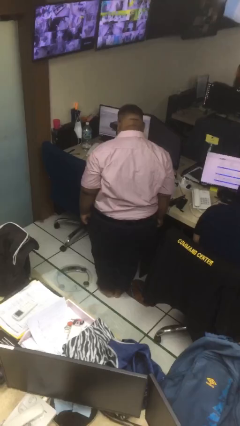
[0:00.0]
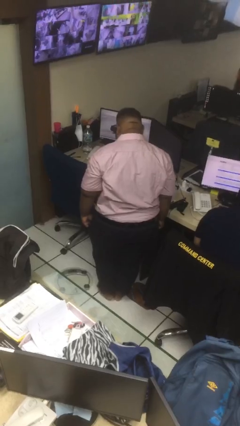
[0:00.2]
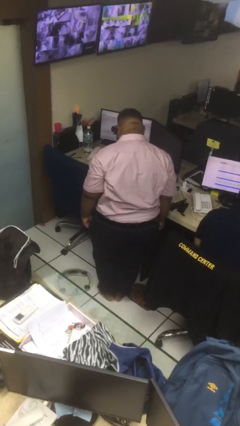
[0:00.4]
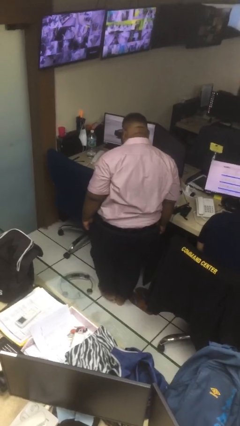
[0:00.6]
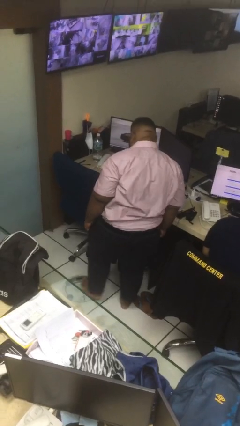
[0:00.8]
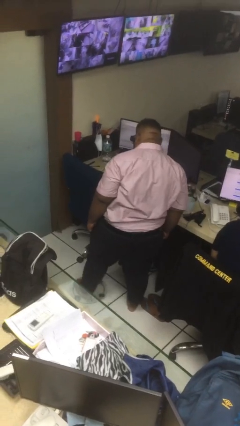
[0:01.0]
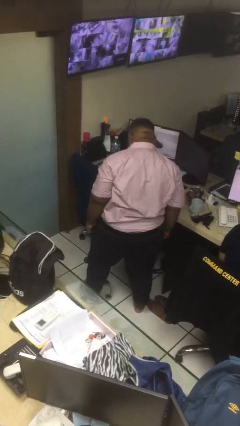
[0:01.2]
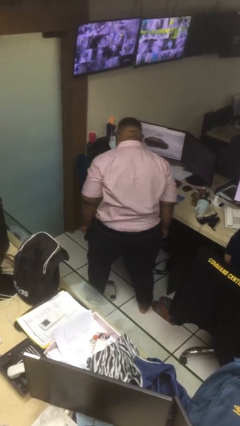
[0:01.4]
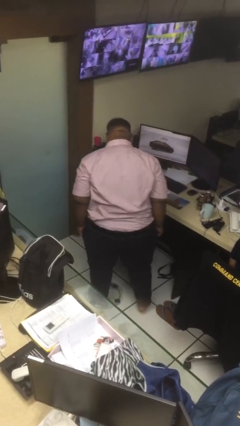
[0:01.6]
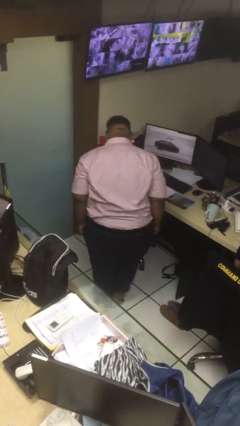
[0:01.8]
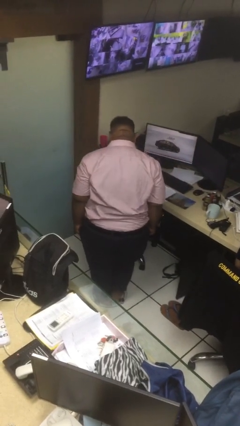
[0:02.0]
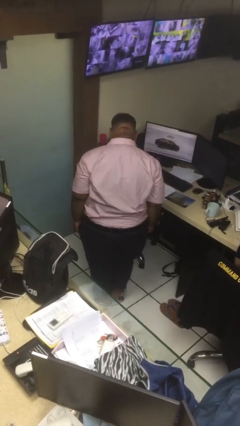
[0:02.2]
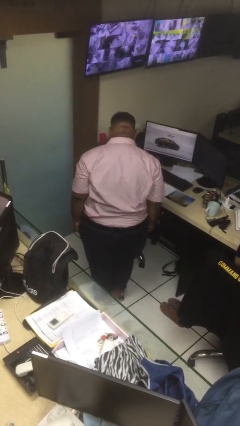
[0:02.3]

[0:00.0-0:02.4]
person uses bodyweight scale

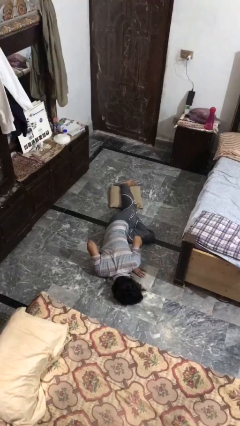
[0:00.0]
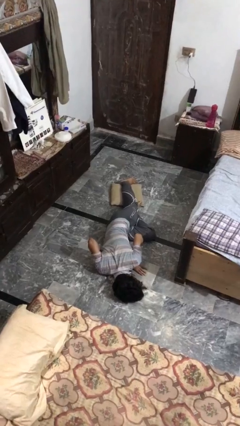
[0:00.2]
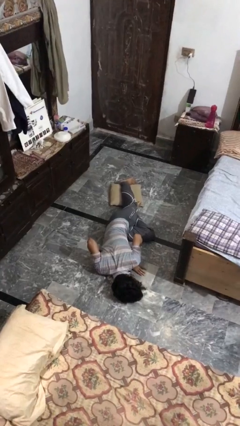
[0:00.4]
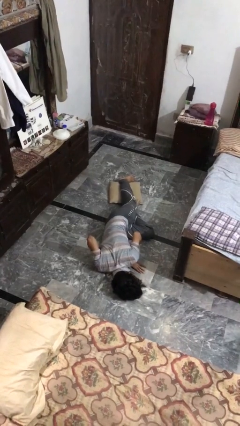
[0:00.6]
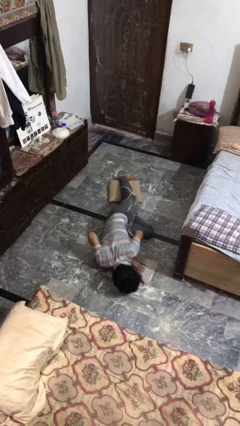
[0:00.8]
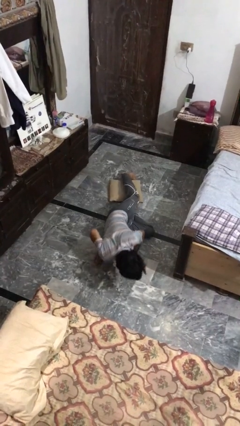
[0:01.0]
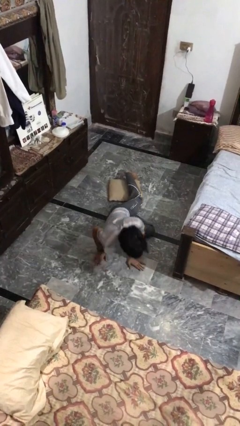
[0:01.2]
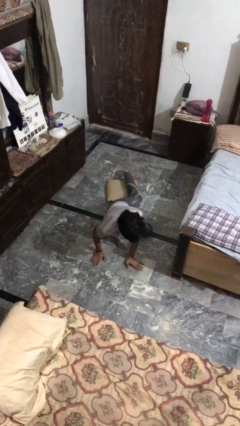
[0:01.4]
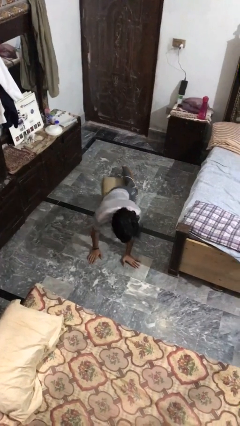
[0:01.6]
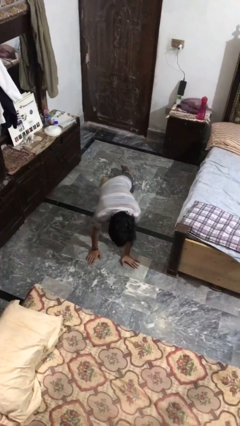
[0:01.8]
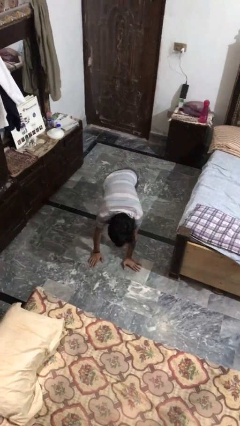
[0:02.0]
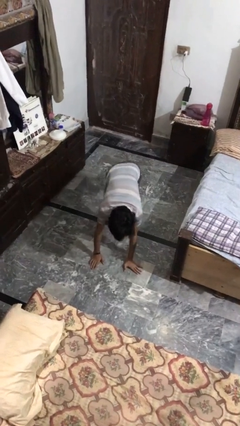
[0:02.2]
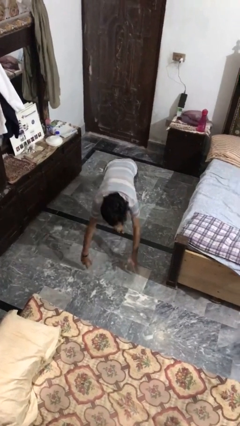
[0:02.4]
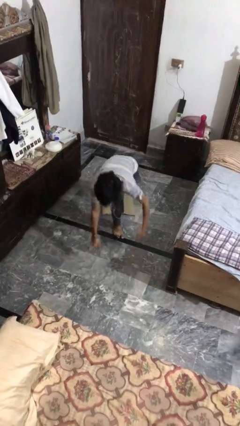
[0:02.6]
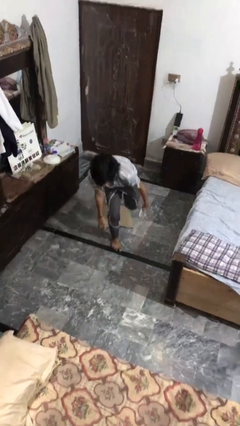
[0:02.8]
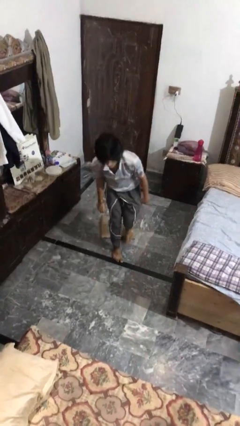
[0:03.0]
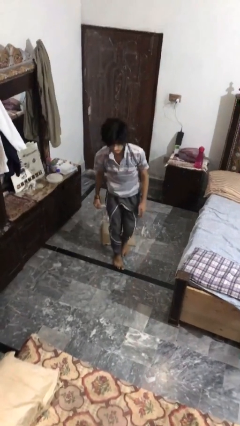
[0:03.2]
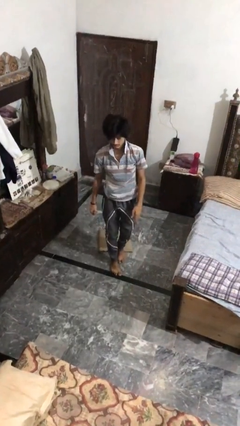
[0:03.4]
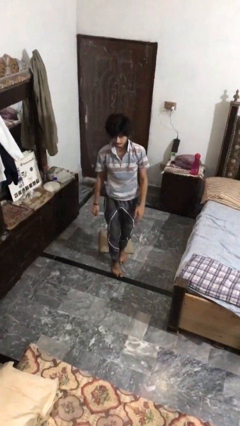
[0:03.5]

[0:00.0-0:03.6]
person stands up from floor

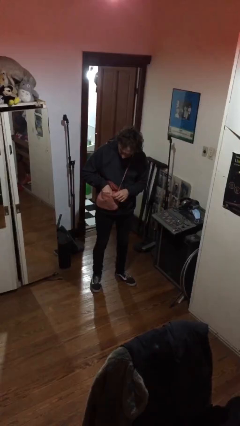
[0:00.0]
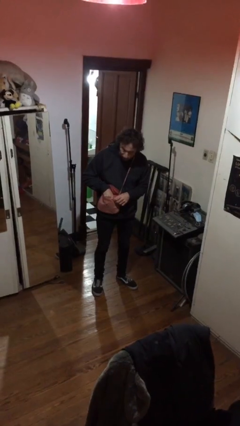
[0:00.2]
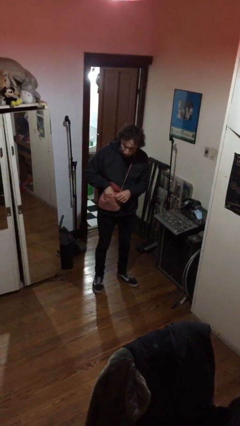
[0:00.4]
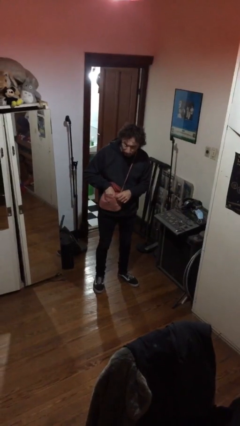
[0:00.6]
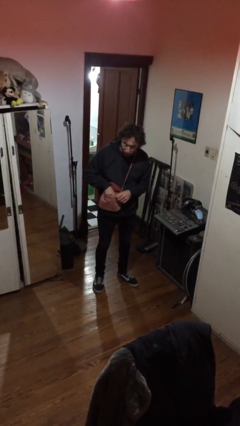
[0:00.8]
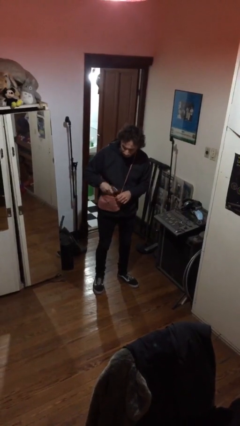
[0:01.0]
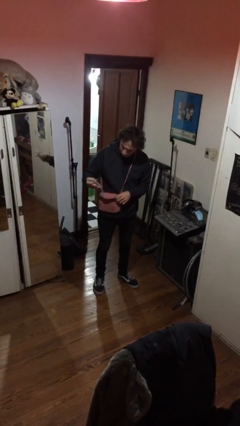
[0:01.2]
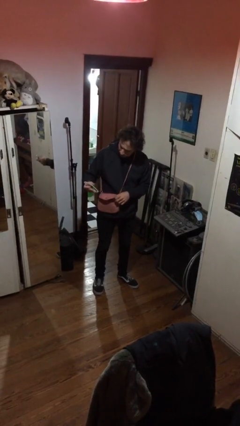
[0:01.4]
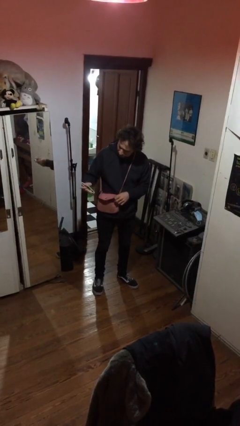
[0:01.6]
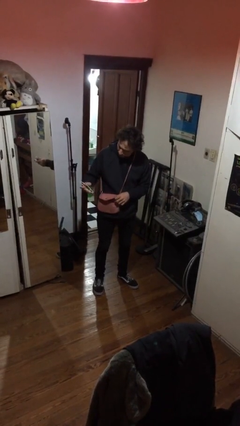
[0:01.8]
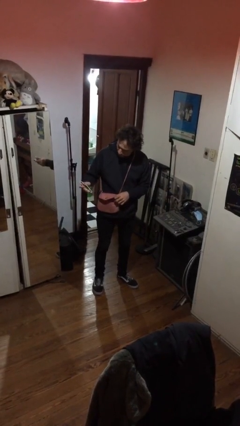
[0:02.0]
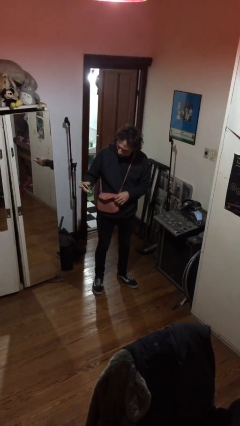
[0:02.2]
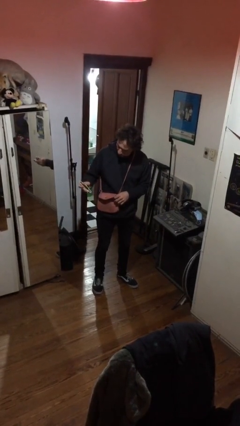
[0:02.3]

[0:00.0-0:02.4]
person takes object from purse

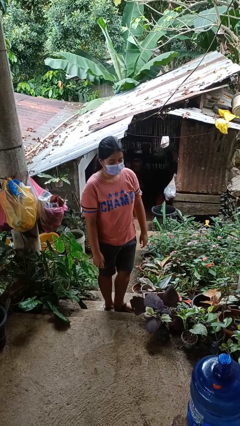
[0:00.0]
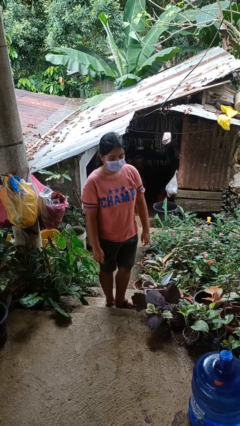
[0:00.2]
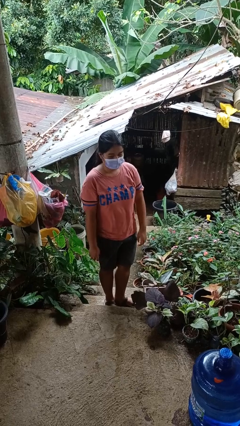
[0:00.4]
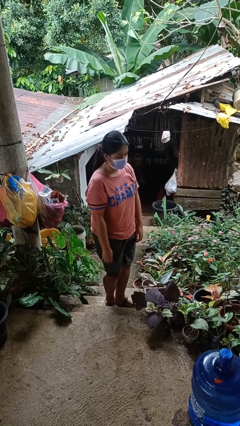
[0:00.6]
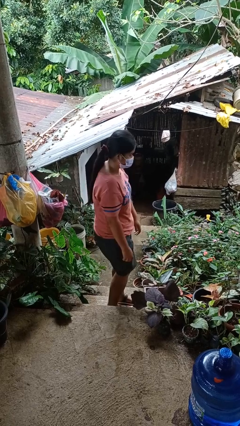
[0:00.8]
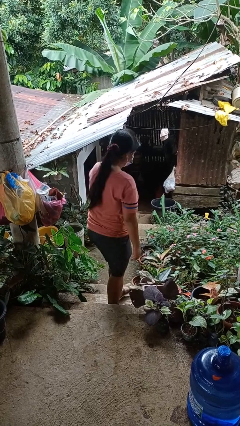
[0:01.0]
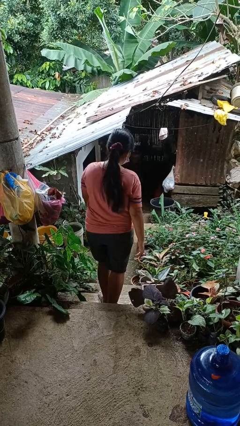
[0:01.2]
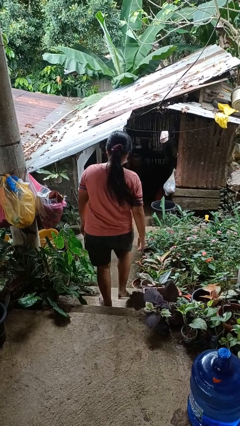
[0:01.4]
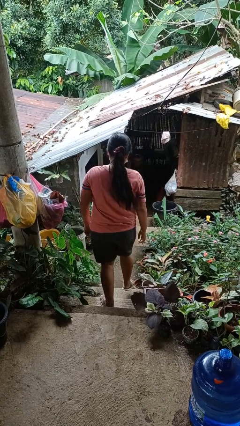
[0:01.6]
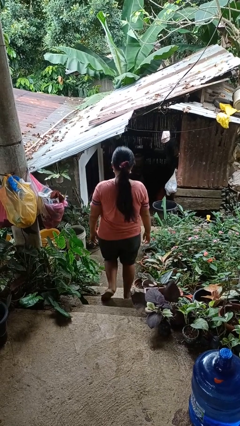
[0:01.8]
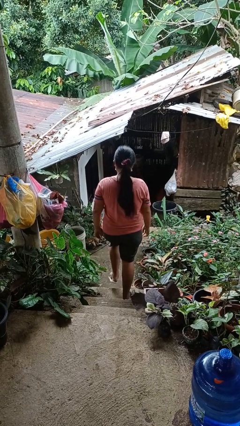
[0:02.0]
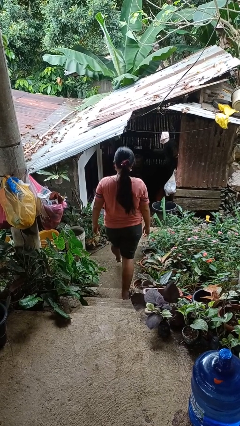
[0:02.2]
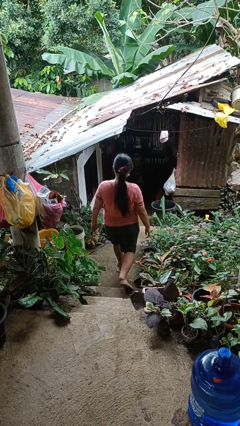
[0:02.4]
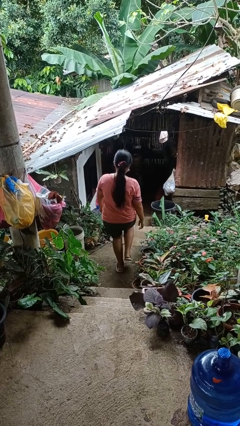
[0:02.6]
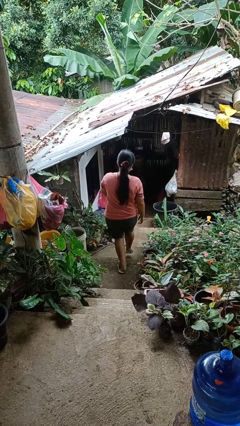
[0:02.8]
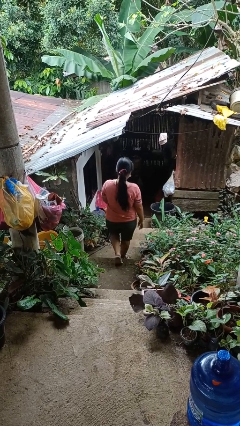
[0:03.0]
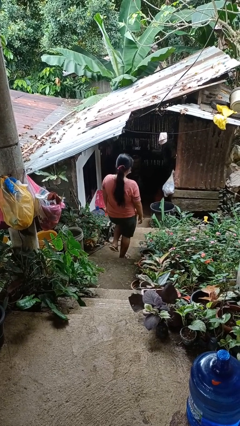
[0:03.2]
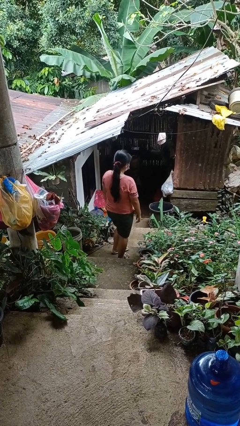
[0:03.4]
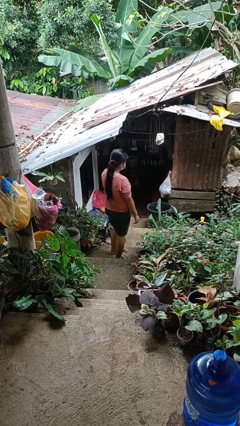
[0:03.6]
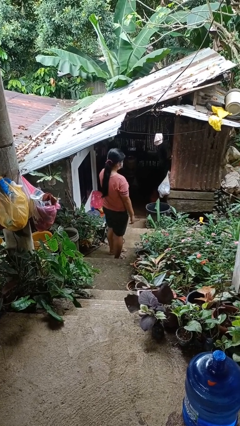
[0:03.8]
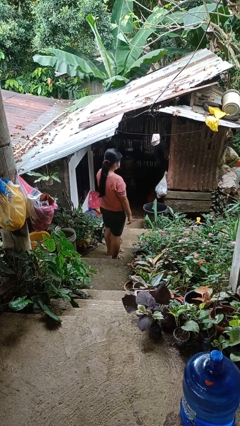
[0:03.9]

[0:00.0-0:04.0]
person climbs down stairs

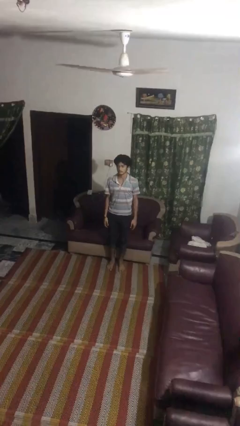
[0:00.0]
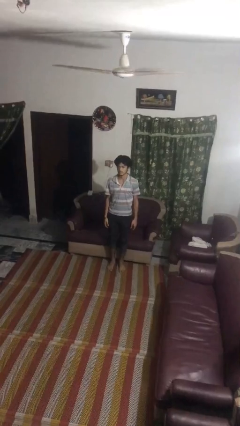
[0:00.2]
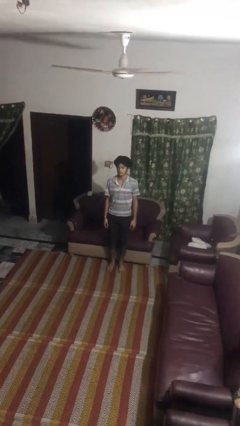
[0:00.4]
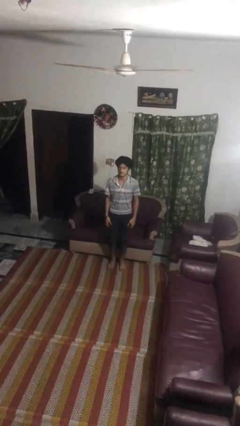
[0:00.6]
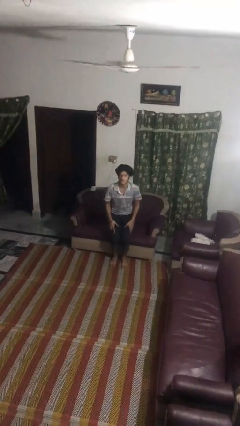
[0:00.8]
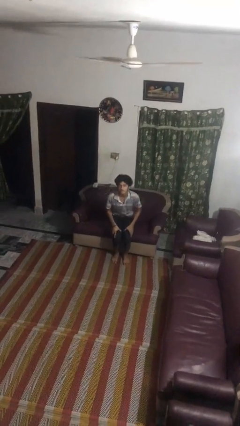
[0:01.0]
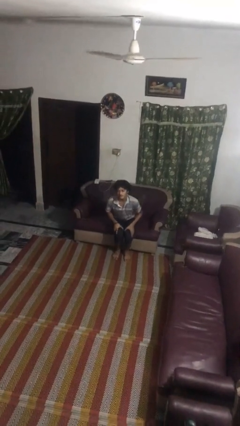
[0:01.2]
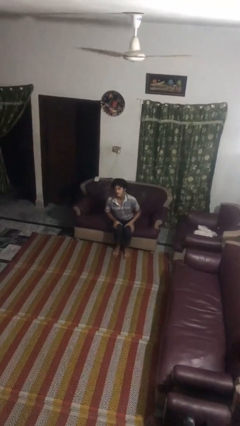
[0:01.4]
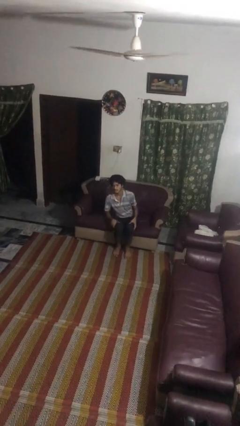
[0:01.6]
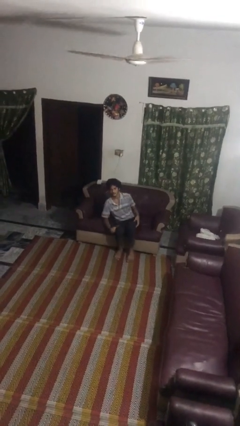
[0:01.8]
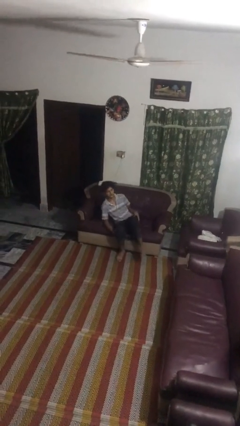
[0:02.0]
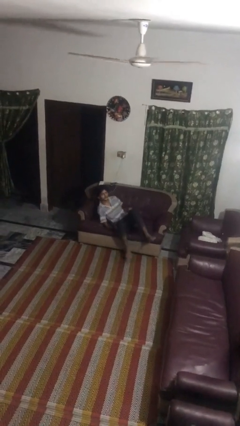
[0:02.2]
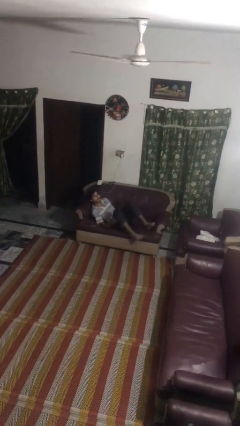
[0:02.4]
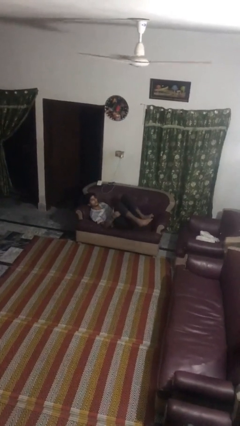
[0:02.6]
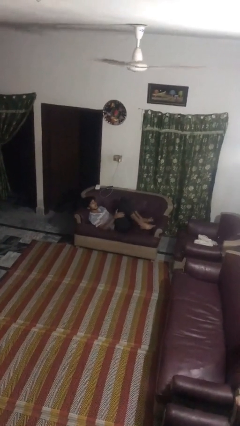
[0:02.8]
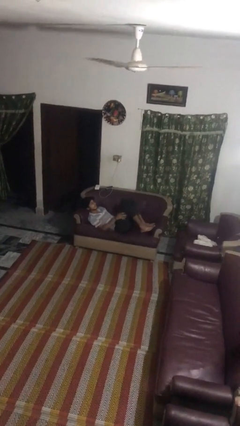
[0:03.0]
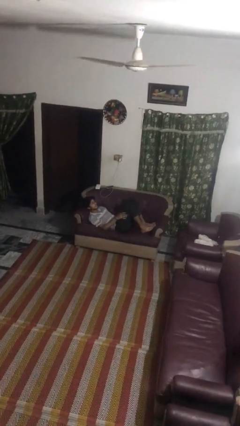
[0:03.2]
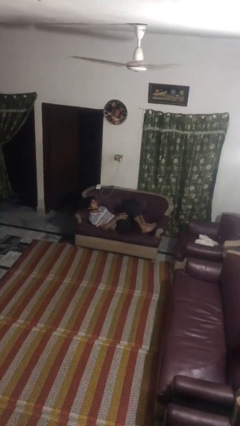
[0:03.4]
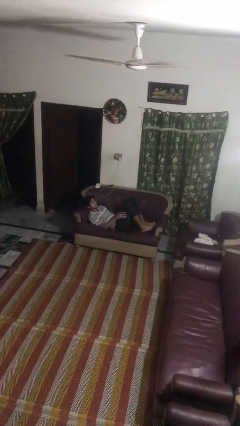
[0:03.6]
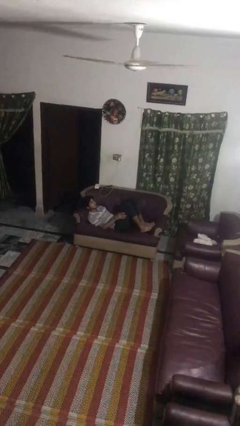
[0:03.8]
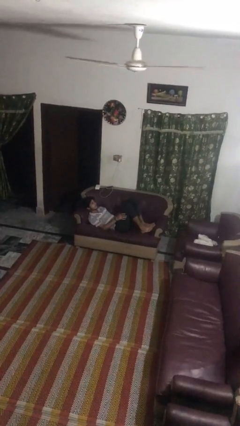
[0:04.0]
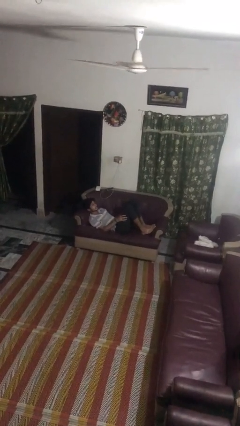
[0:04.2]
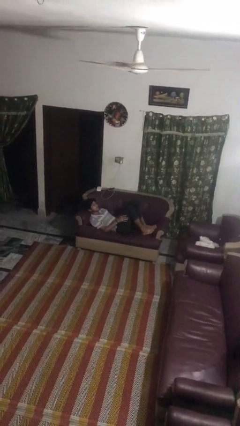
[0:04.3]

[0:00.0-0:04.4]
person lies down on couch

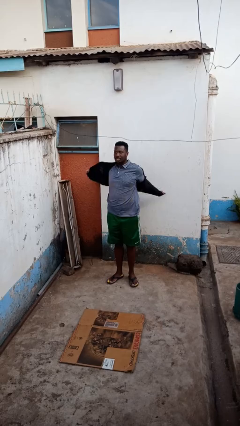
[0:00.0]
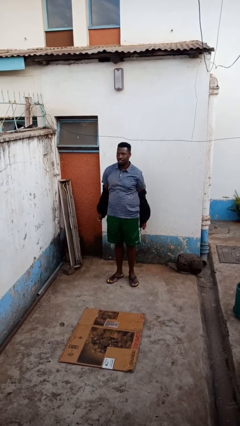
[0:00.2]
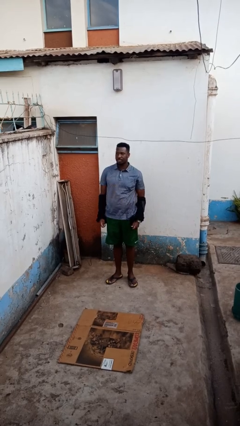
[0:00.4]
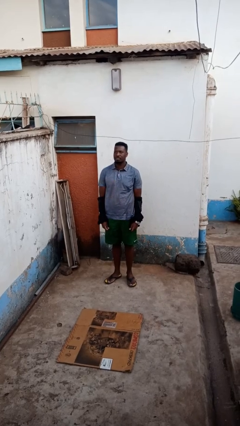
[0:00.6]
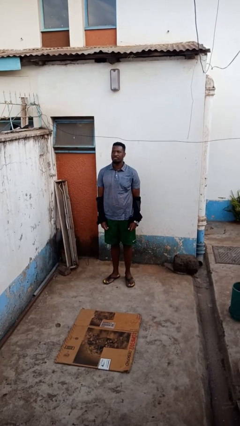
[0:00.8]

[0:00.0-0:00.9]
person takes off jacket
